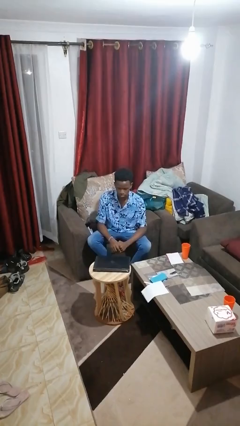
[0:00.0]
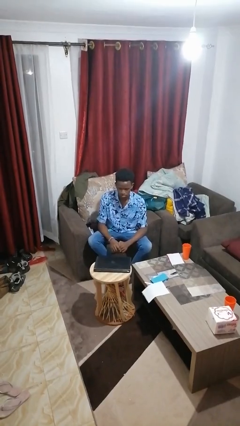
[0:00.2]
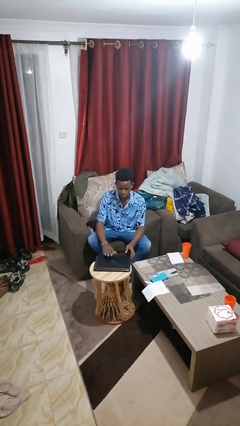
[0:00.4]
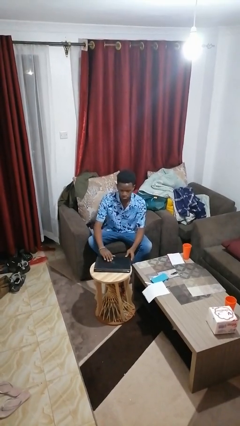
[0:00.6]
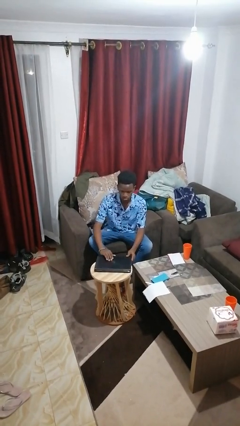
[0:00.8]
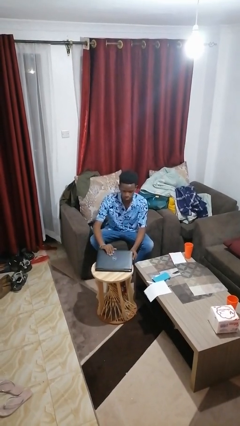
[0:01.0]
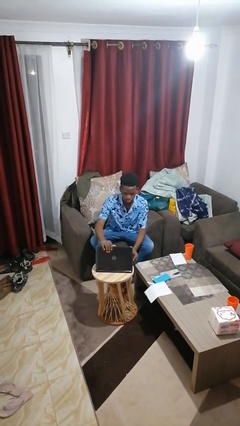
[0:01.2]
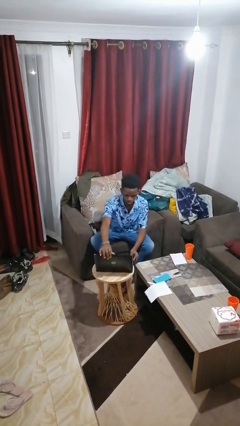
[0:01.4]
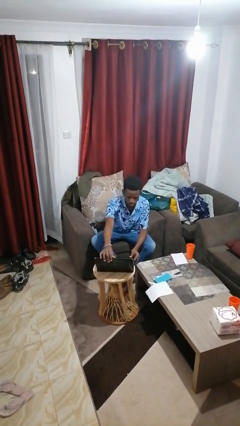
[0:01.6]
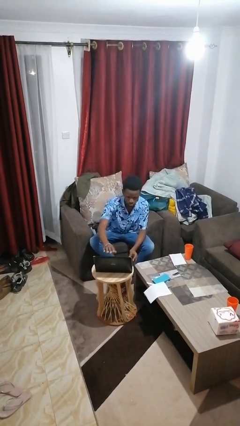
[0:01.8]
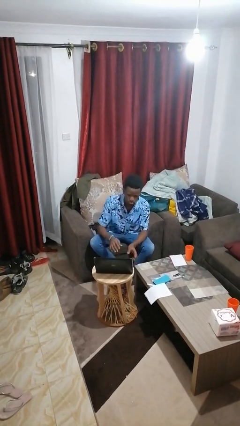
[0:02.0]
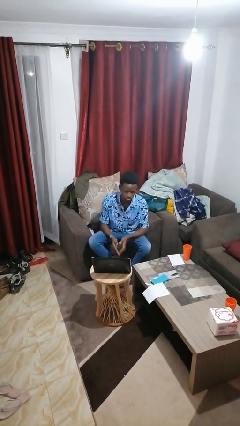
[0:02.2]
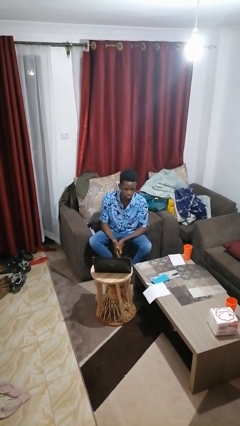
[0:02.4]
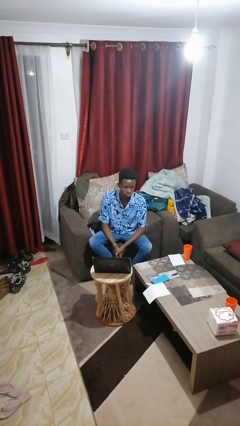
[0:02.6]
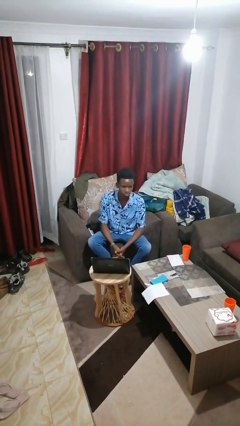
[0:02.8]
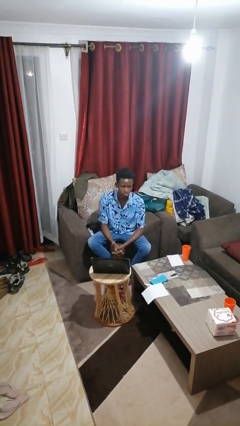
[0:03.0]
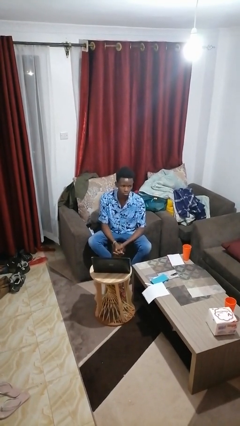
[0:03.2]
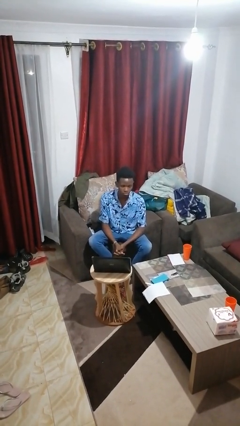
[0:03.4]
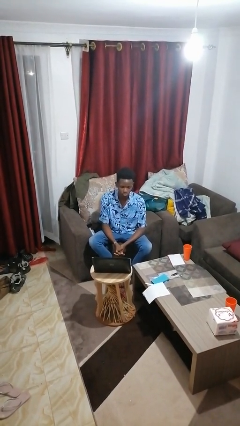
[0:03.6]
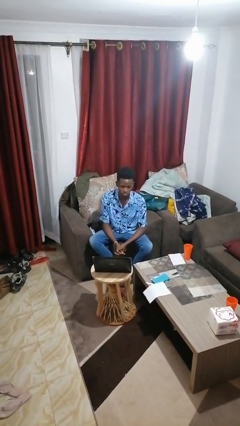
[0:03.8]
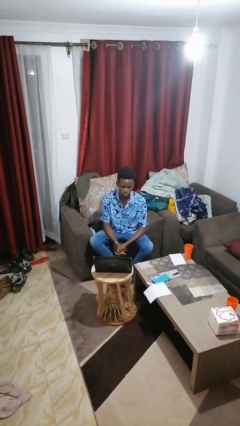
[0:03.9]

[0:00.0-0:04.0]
person opens laptop

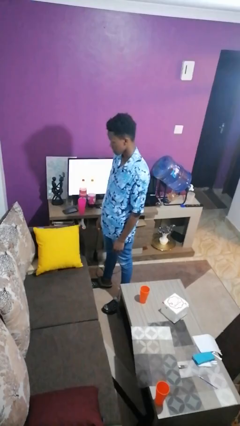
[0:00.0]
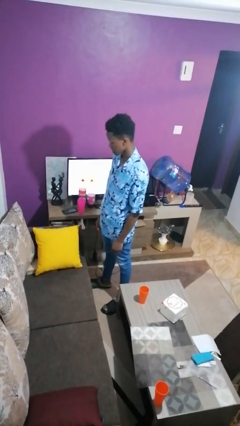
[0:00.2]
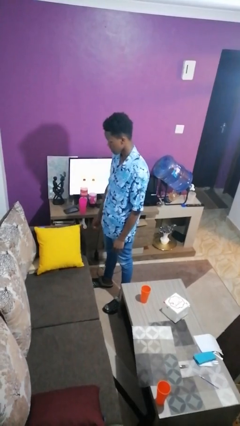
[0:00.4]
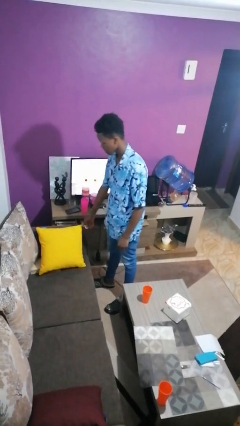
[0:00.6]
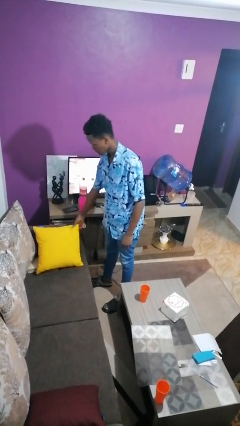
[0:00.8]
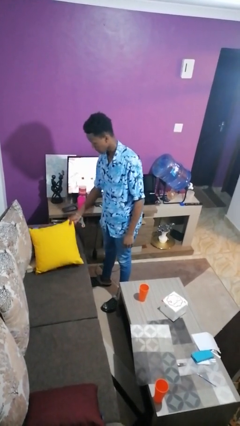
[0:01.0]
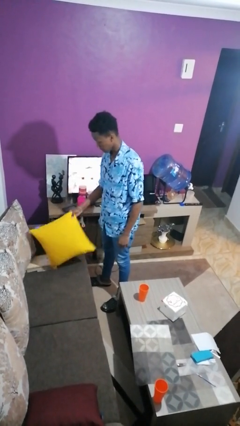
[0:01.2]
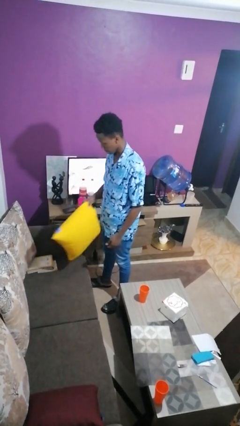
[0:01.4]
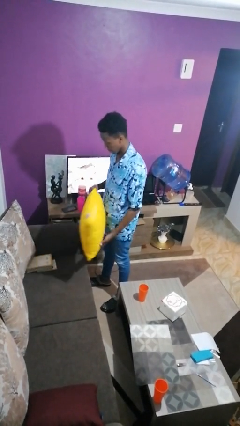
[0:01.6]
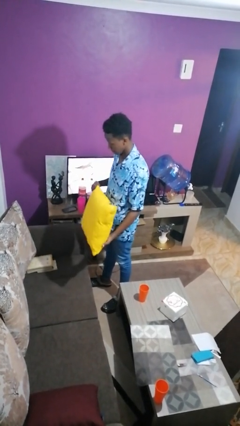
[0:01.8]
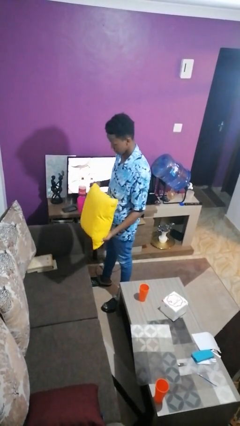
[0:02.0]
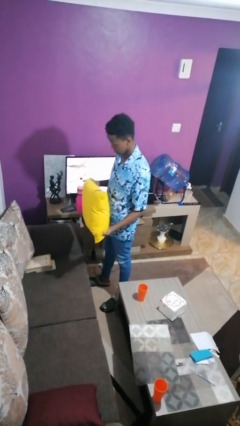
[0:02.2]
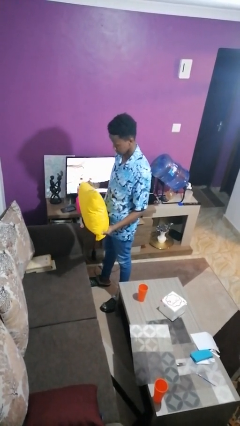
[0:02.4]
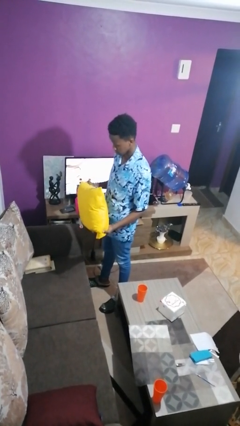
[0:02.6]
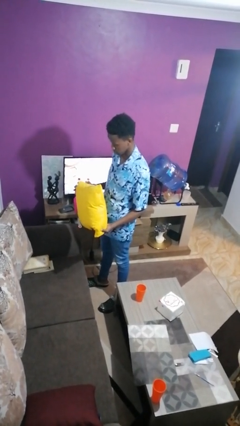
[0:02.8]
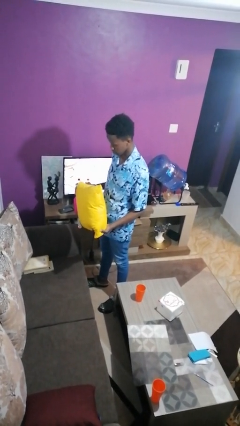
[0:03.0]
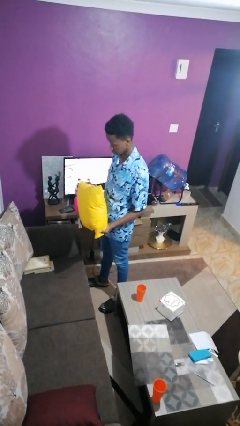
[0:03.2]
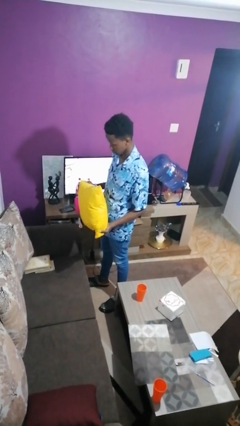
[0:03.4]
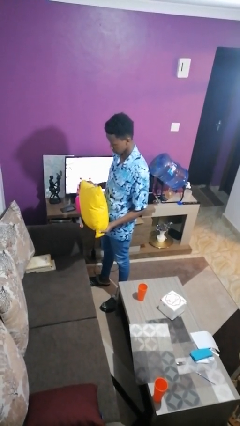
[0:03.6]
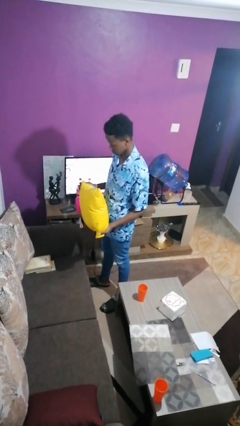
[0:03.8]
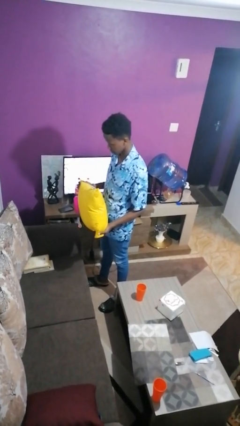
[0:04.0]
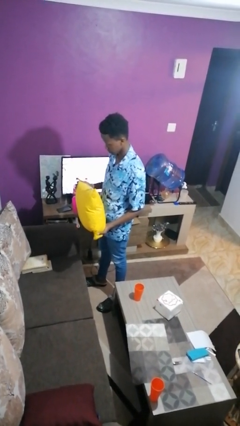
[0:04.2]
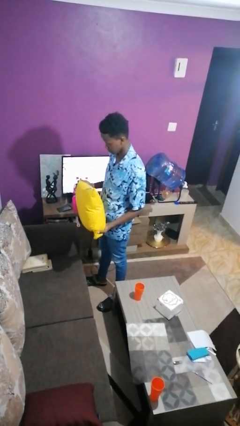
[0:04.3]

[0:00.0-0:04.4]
person picks up object from couch

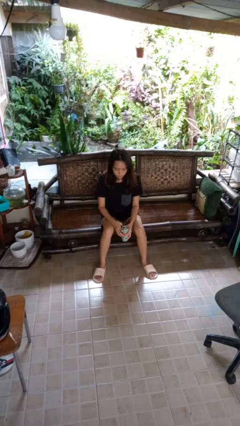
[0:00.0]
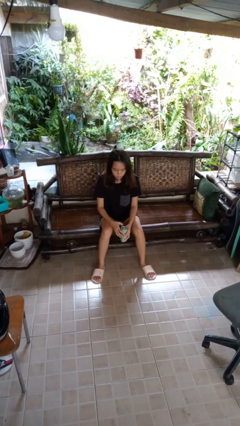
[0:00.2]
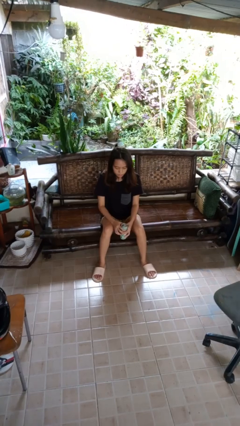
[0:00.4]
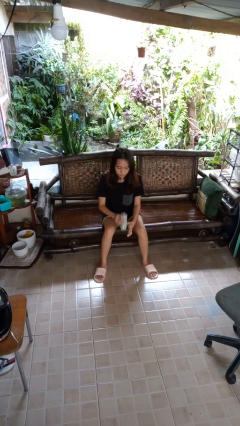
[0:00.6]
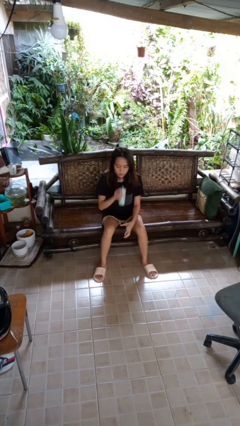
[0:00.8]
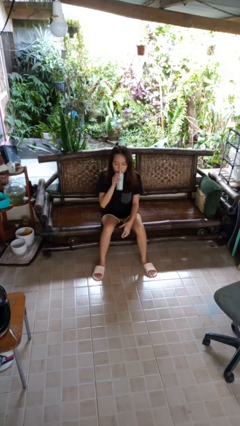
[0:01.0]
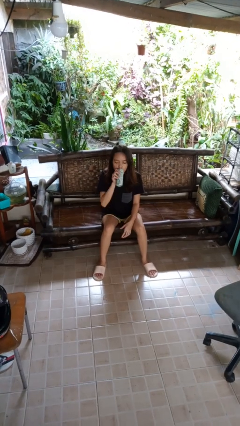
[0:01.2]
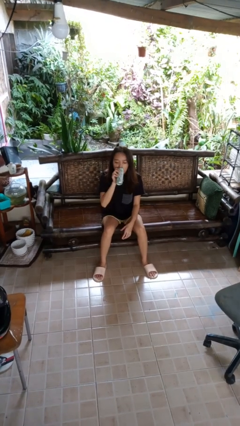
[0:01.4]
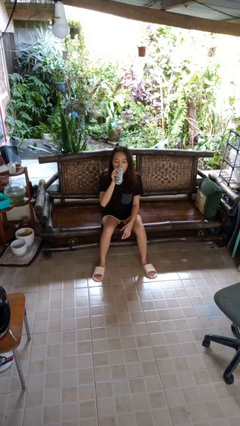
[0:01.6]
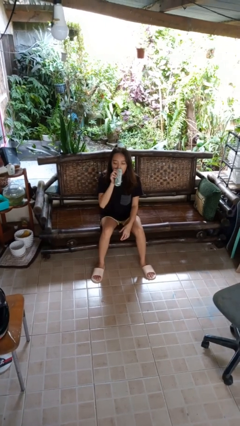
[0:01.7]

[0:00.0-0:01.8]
person drinks from beverage can

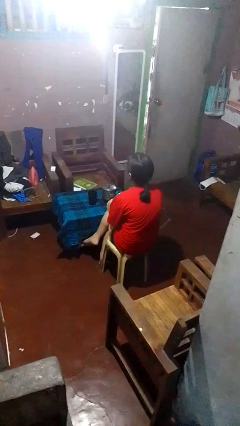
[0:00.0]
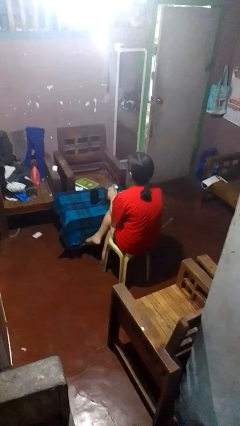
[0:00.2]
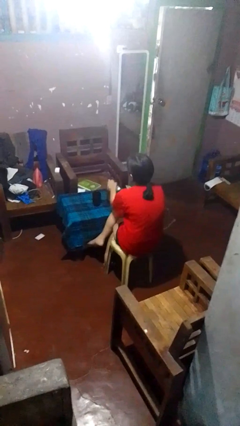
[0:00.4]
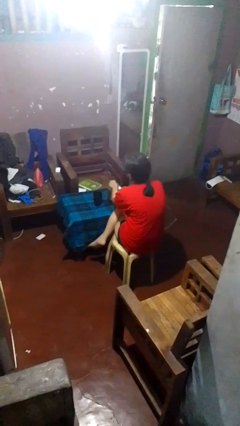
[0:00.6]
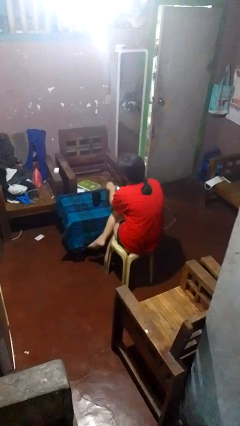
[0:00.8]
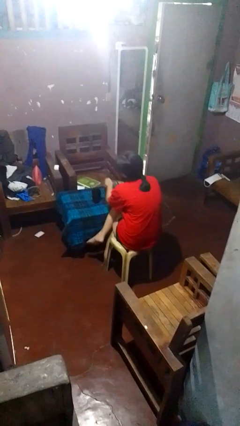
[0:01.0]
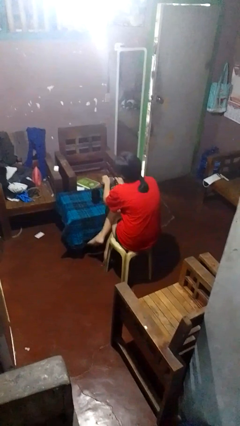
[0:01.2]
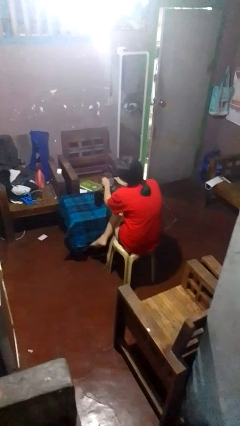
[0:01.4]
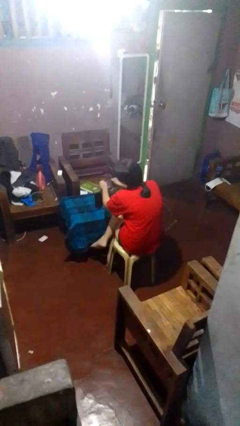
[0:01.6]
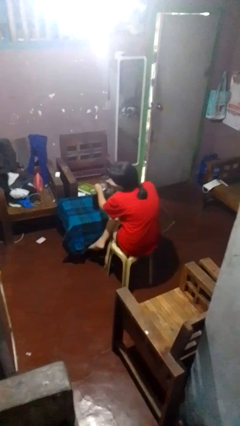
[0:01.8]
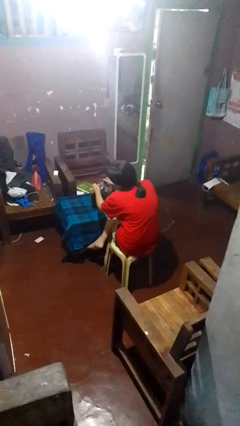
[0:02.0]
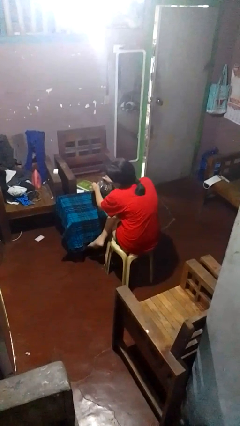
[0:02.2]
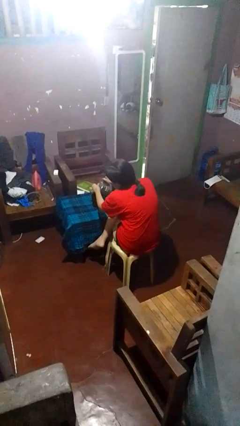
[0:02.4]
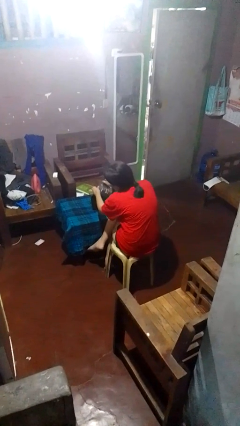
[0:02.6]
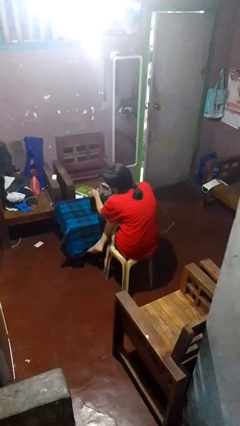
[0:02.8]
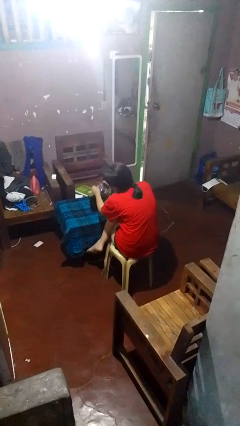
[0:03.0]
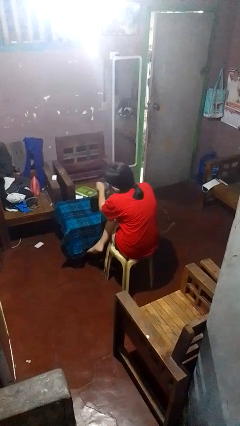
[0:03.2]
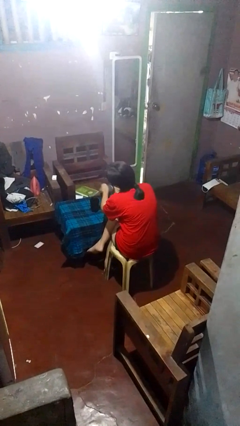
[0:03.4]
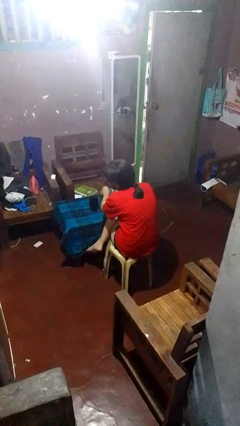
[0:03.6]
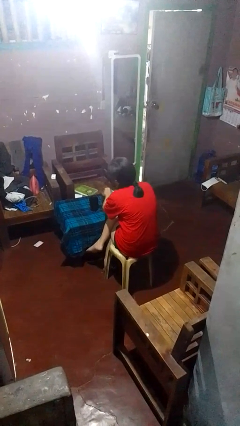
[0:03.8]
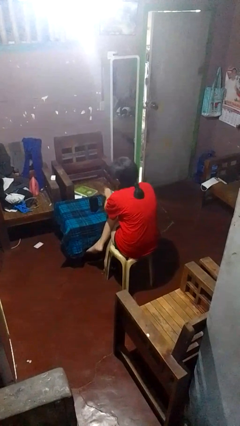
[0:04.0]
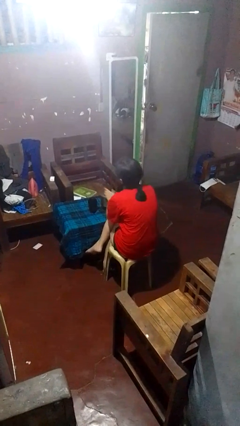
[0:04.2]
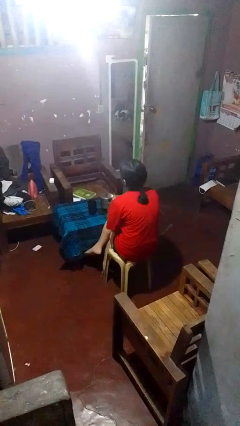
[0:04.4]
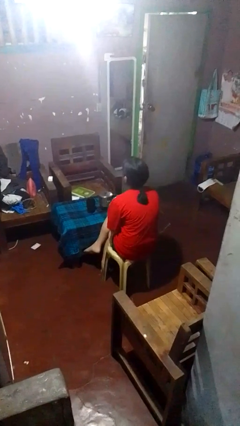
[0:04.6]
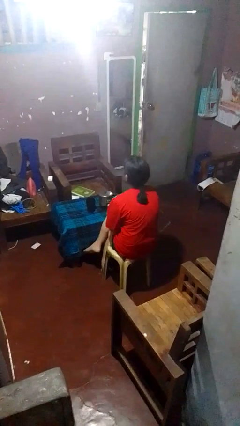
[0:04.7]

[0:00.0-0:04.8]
person pours coffee into mug

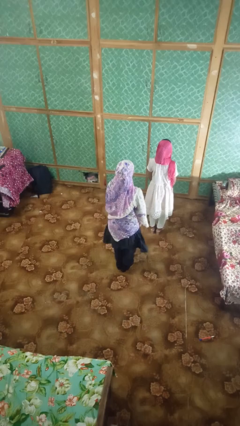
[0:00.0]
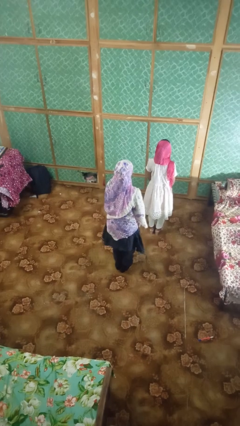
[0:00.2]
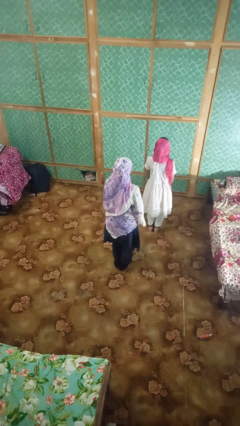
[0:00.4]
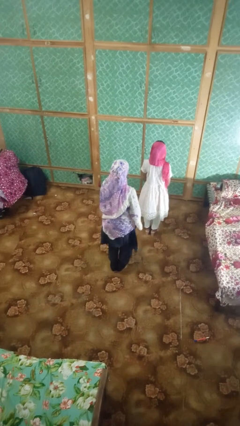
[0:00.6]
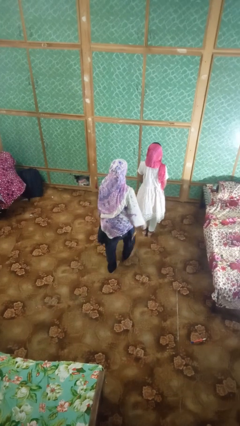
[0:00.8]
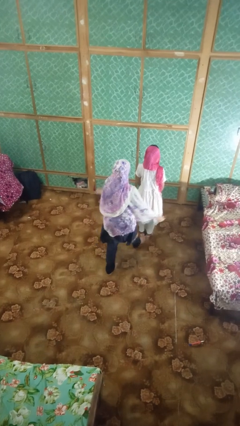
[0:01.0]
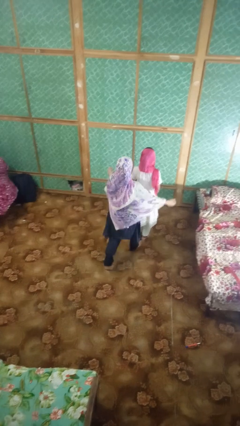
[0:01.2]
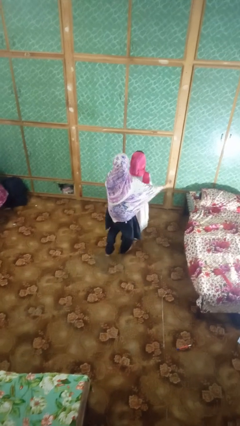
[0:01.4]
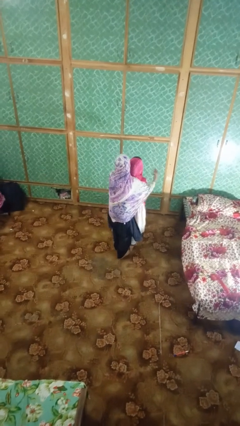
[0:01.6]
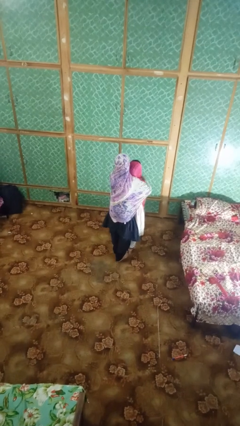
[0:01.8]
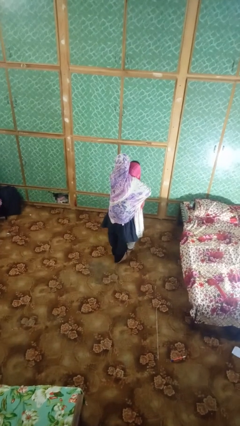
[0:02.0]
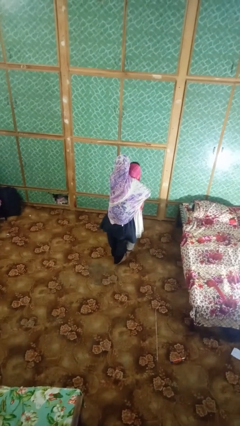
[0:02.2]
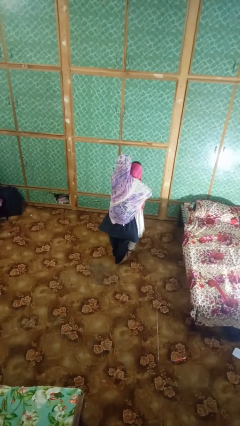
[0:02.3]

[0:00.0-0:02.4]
person hugs person from behind

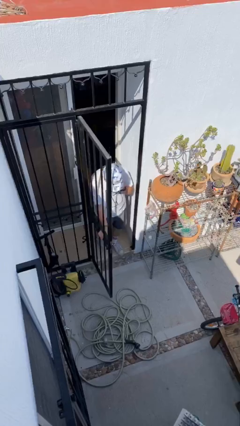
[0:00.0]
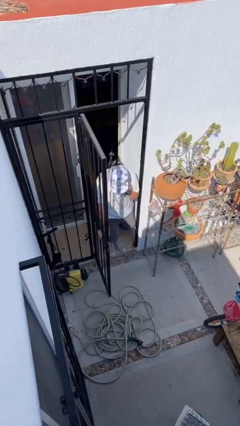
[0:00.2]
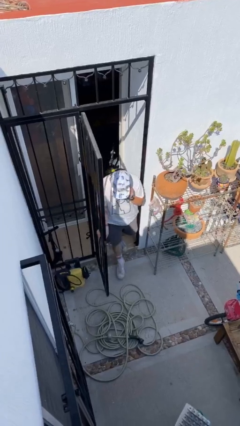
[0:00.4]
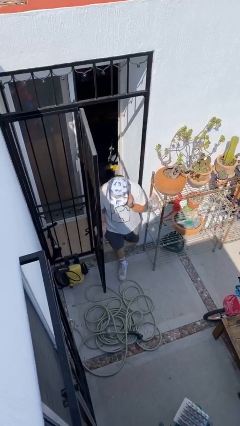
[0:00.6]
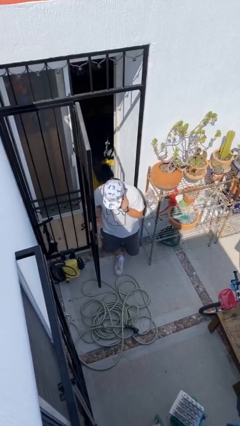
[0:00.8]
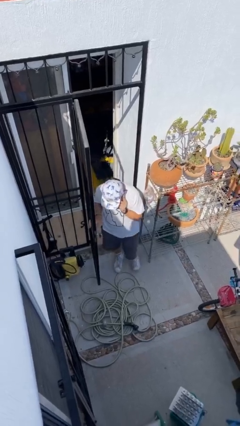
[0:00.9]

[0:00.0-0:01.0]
person enters scene through structure
